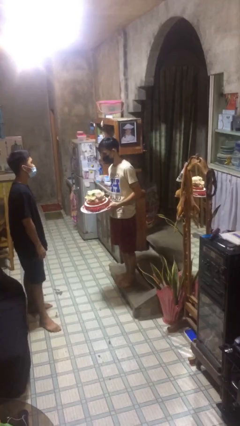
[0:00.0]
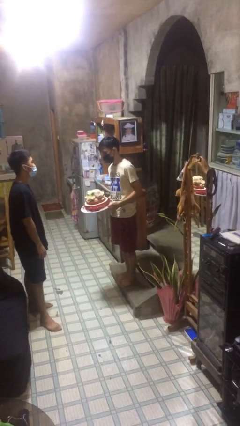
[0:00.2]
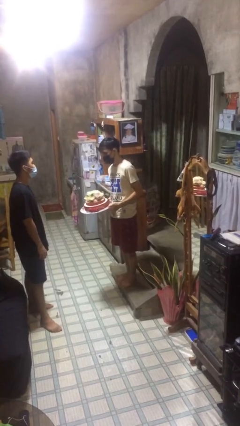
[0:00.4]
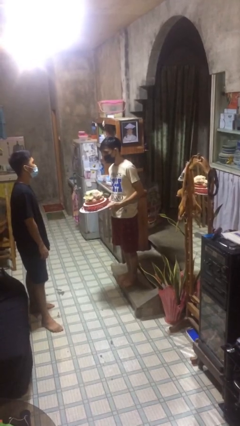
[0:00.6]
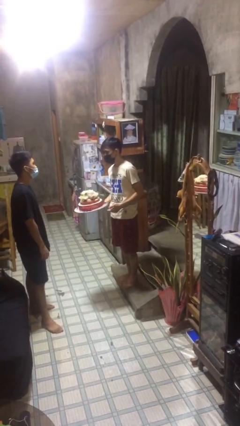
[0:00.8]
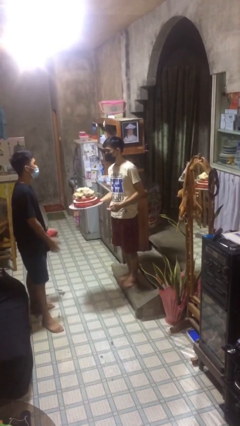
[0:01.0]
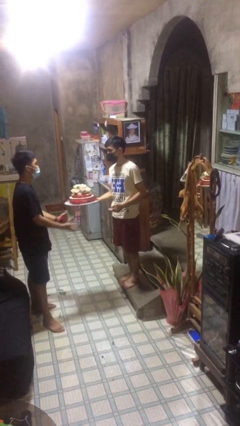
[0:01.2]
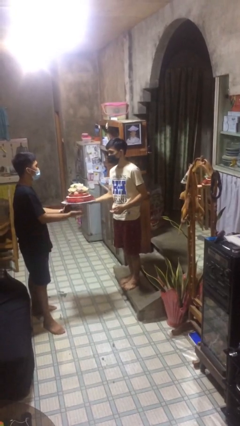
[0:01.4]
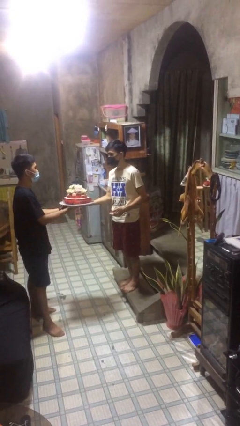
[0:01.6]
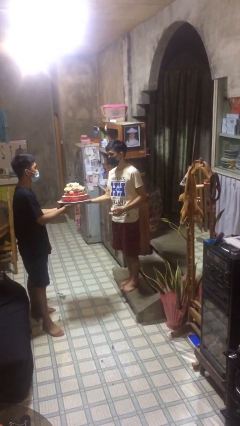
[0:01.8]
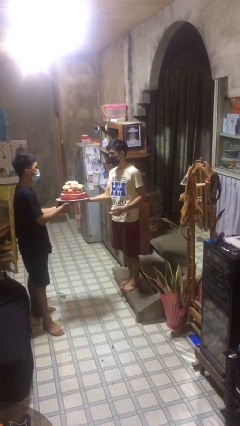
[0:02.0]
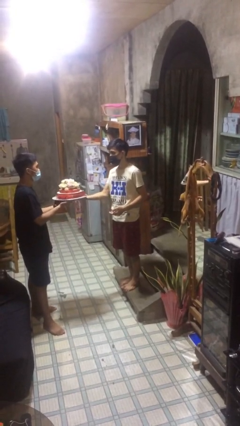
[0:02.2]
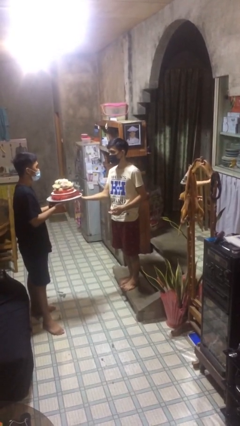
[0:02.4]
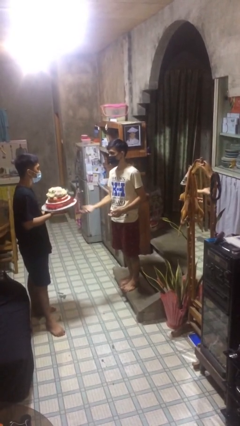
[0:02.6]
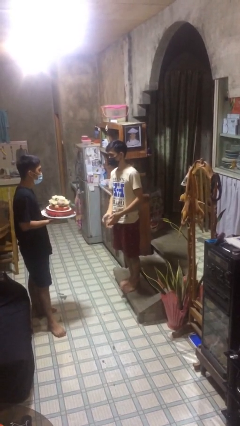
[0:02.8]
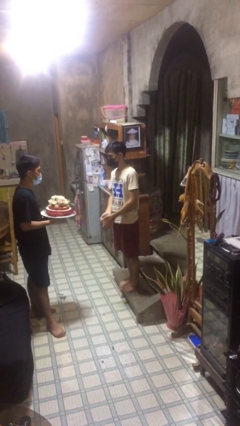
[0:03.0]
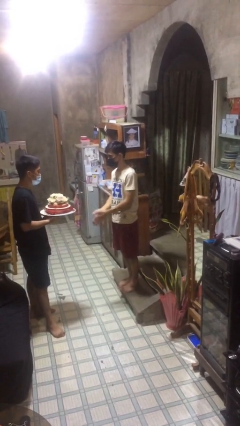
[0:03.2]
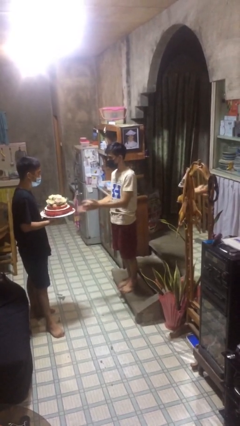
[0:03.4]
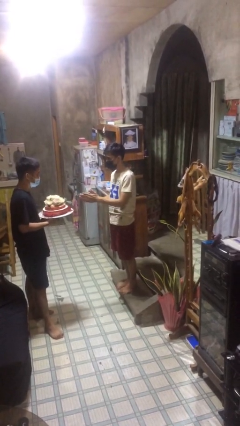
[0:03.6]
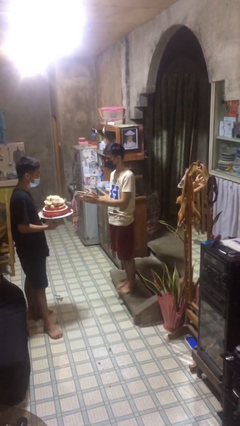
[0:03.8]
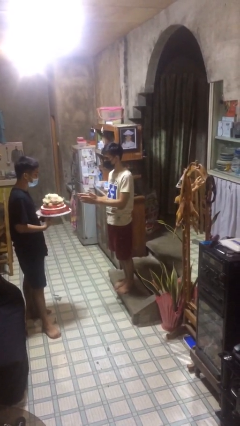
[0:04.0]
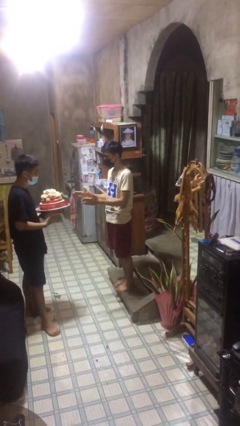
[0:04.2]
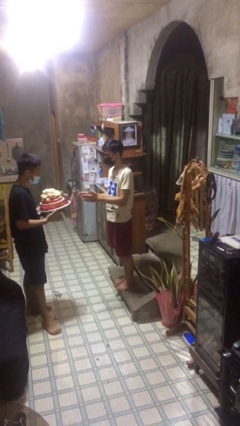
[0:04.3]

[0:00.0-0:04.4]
person transfers object to person

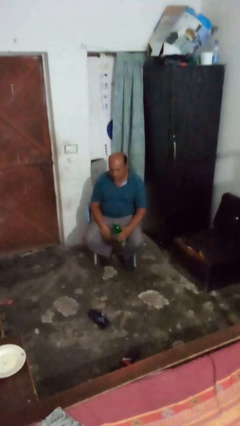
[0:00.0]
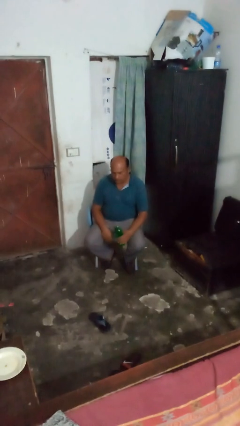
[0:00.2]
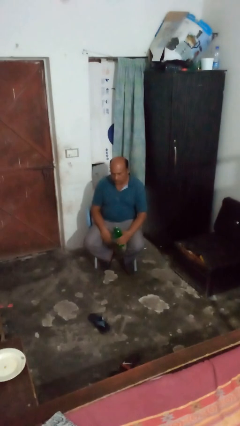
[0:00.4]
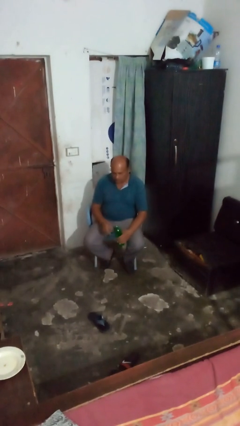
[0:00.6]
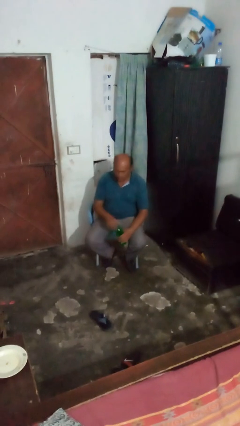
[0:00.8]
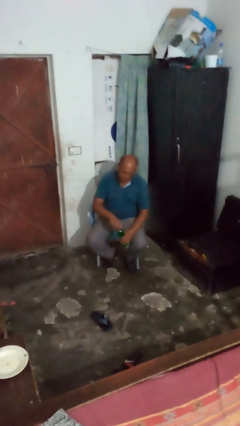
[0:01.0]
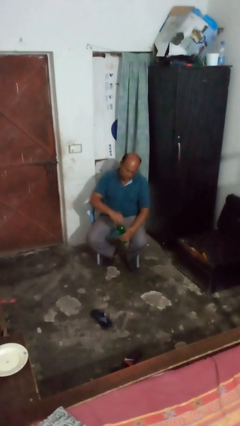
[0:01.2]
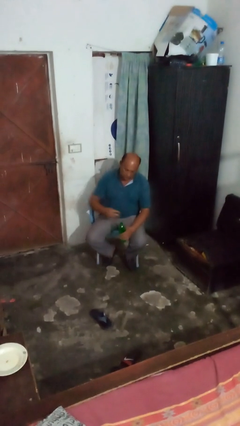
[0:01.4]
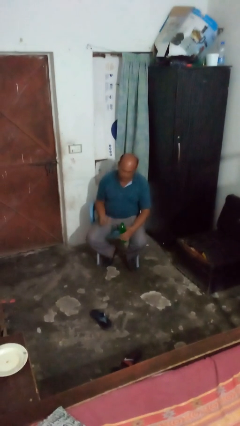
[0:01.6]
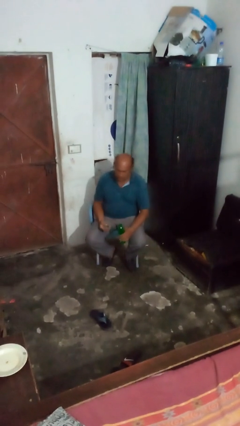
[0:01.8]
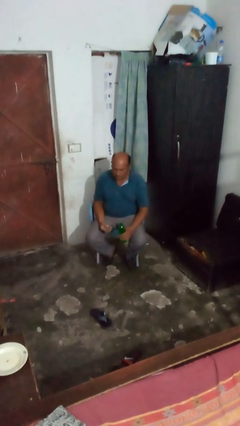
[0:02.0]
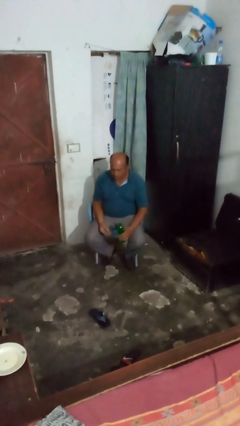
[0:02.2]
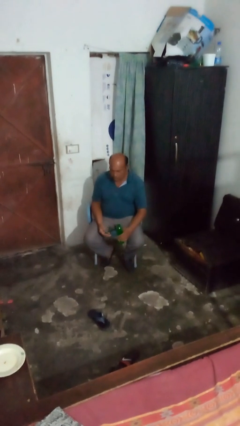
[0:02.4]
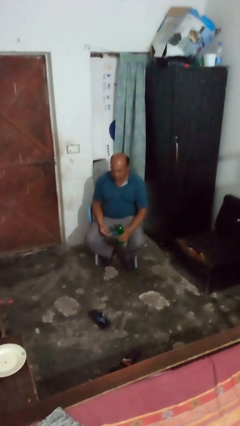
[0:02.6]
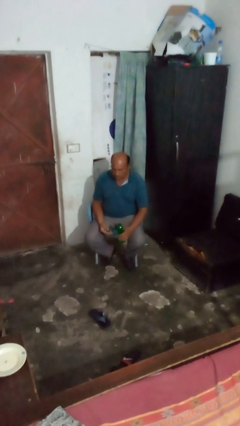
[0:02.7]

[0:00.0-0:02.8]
person unscrews lid from bottle

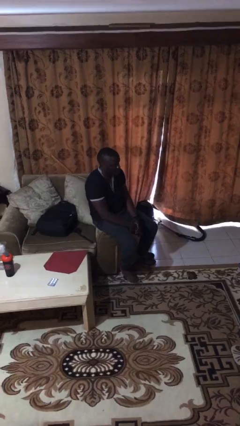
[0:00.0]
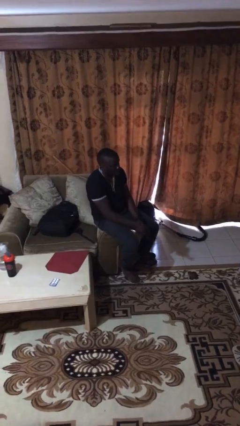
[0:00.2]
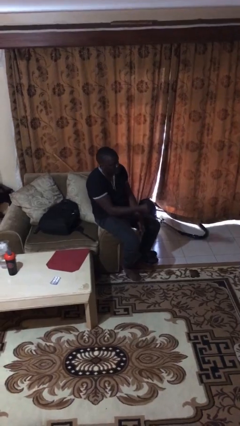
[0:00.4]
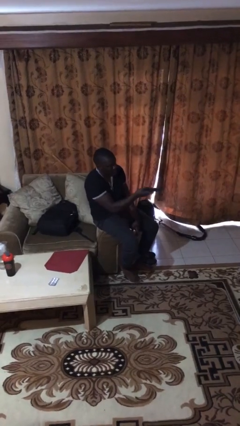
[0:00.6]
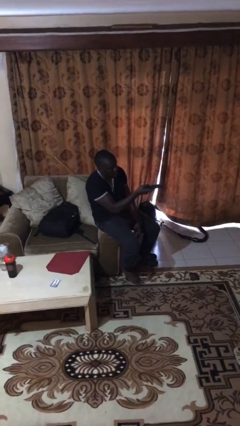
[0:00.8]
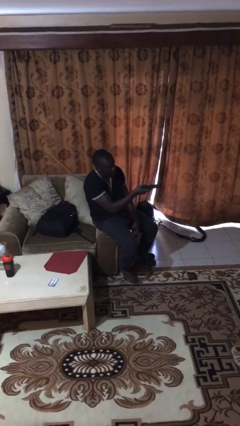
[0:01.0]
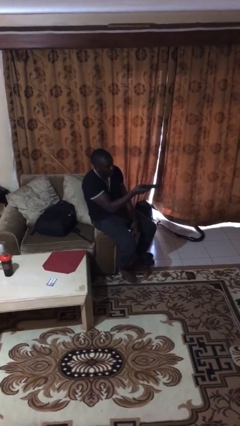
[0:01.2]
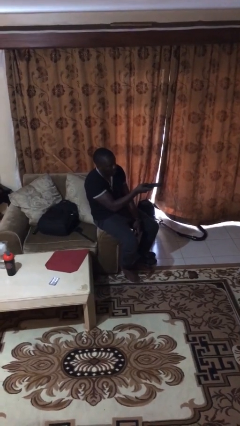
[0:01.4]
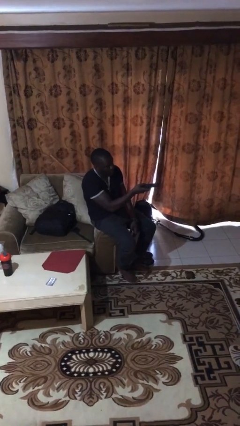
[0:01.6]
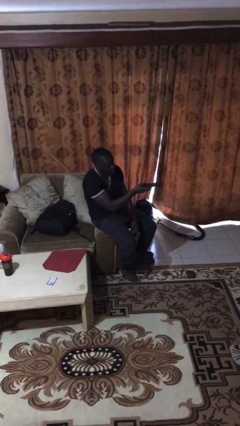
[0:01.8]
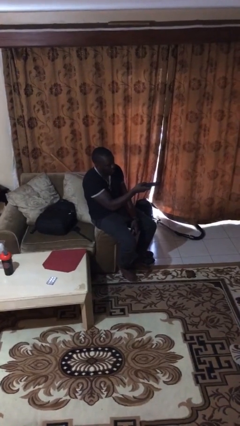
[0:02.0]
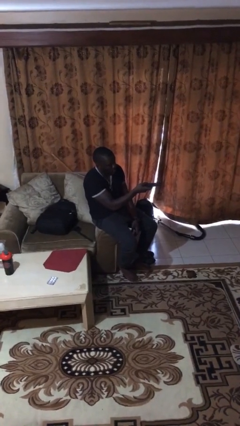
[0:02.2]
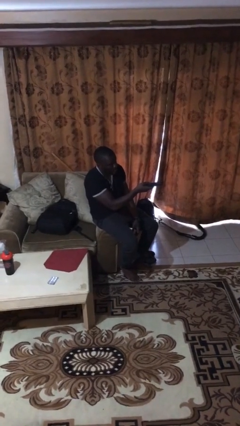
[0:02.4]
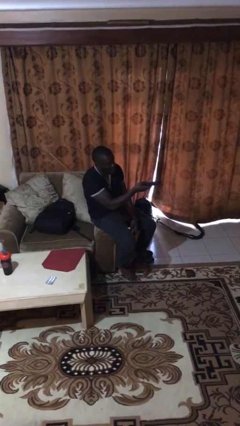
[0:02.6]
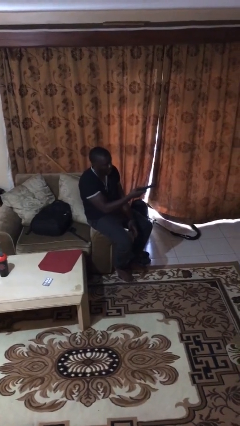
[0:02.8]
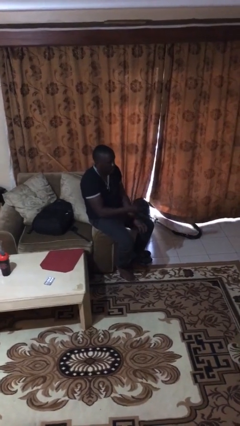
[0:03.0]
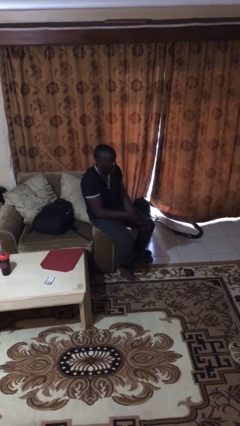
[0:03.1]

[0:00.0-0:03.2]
person uses television remote

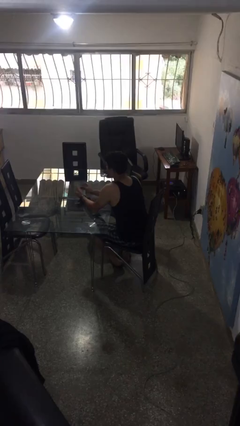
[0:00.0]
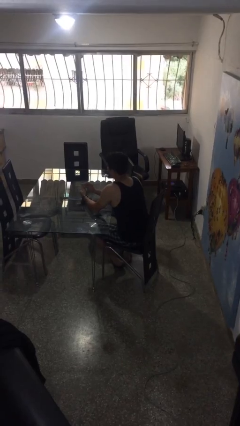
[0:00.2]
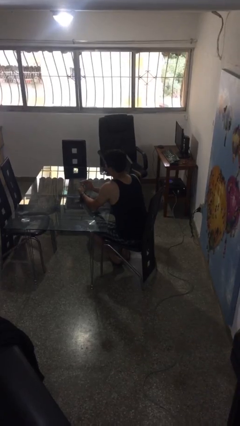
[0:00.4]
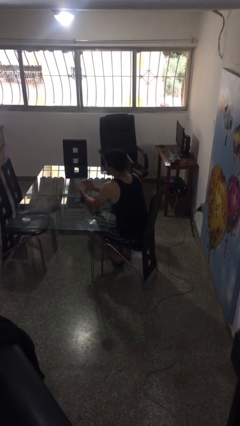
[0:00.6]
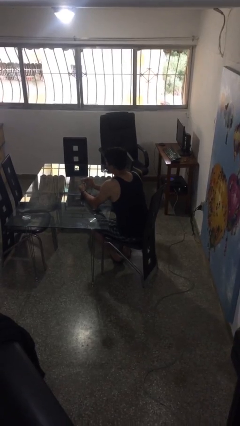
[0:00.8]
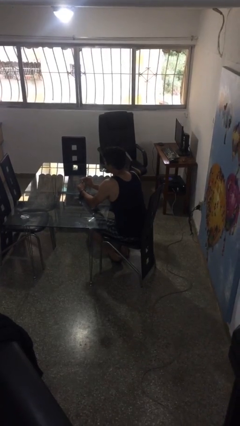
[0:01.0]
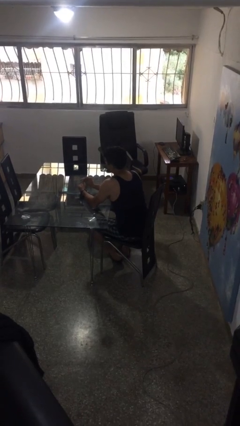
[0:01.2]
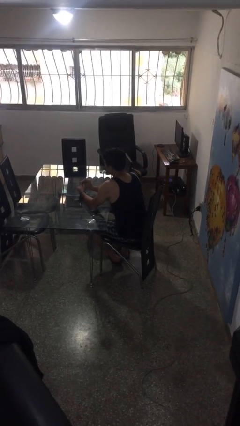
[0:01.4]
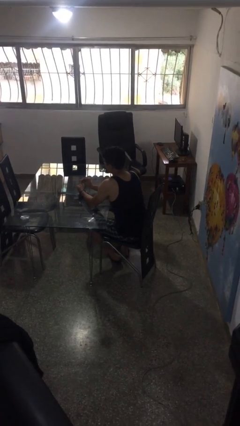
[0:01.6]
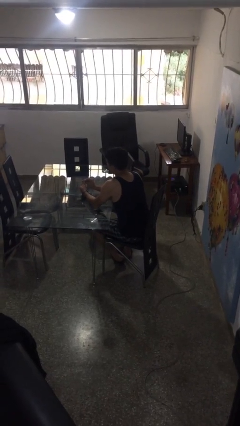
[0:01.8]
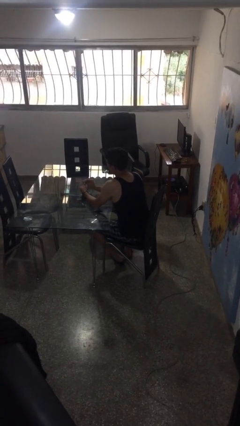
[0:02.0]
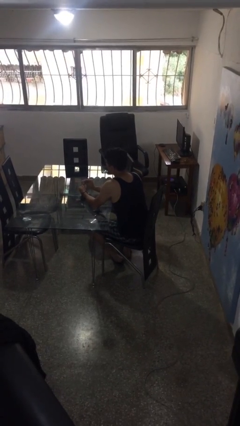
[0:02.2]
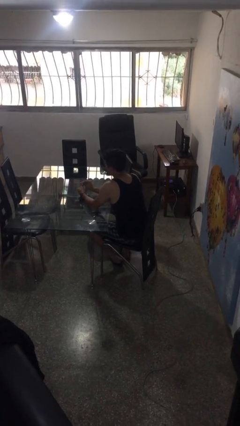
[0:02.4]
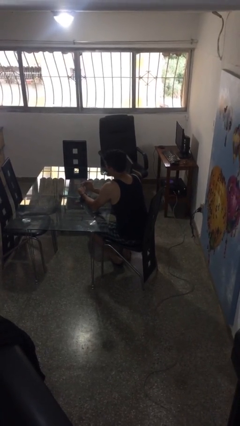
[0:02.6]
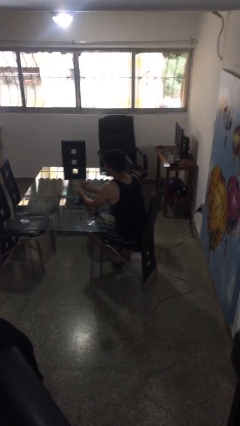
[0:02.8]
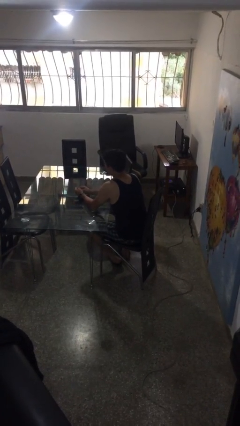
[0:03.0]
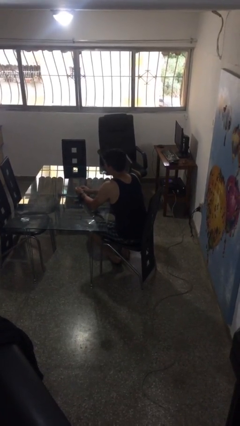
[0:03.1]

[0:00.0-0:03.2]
person files fingernails

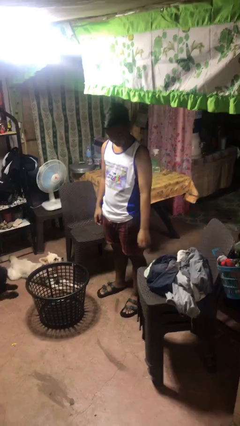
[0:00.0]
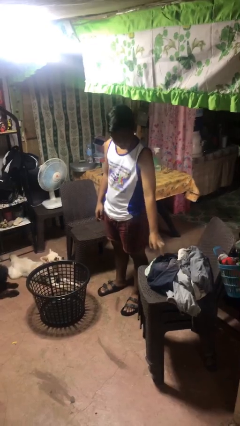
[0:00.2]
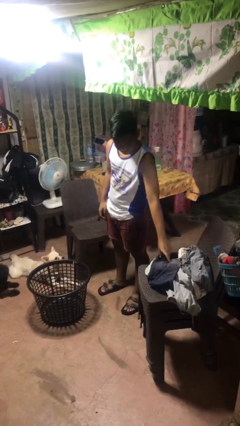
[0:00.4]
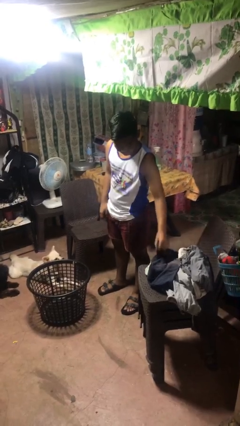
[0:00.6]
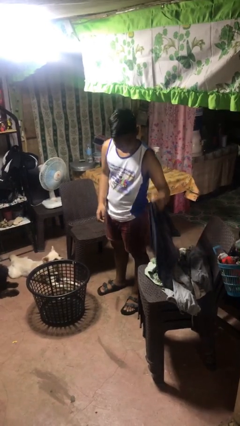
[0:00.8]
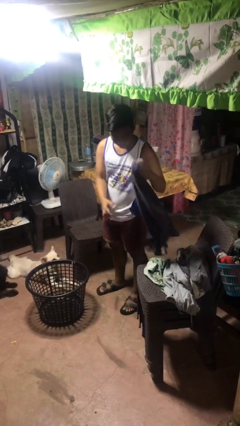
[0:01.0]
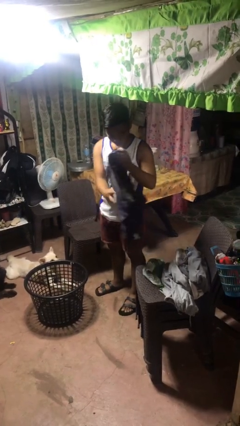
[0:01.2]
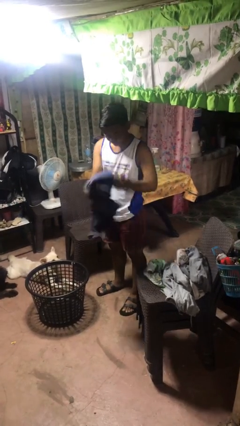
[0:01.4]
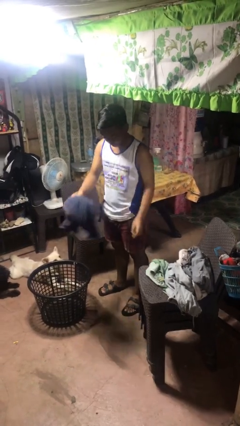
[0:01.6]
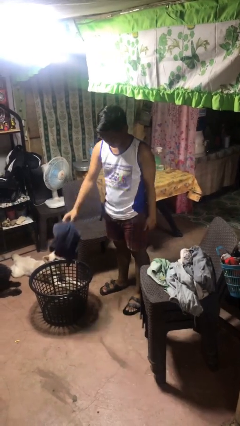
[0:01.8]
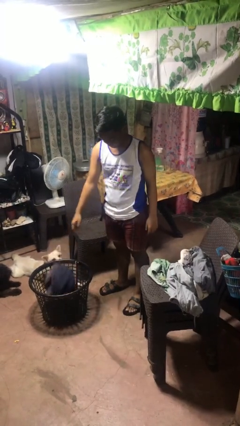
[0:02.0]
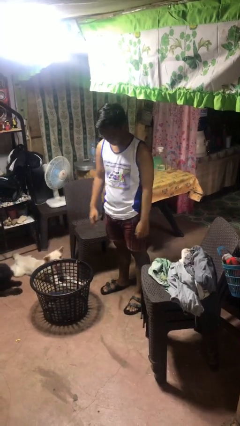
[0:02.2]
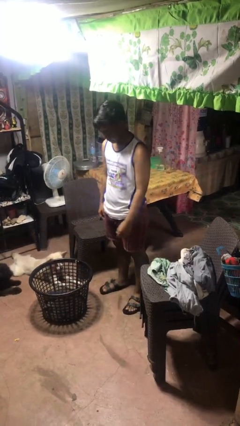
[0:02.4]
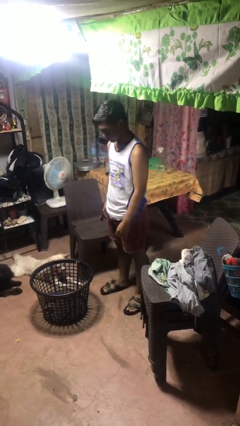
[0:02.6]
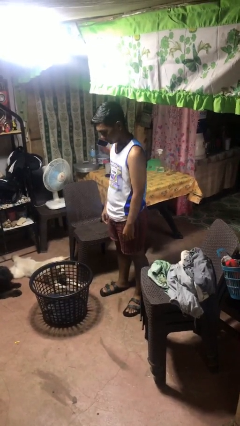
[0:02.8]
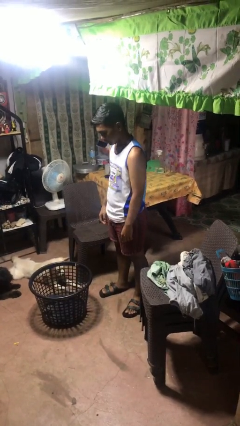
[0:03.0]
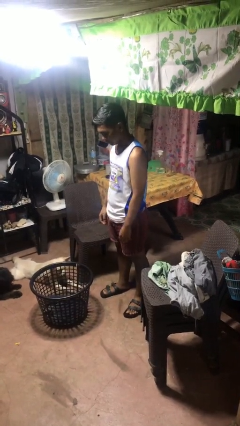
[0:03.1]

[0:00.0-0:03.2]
person puts object into basket

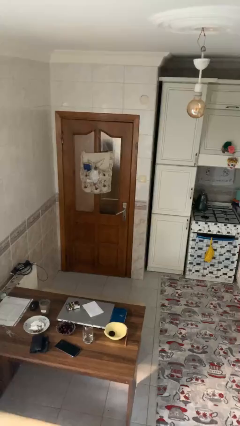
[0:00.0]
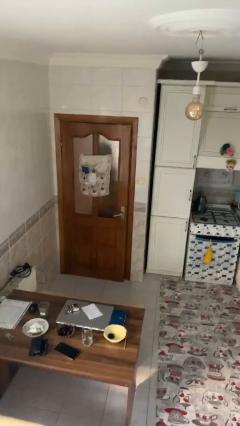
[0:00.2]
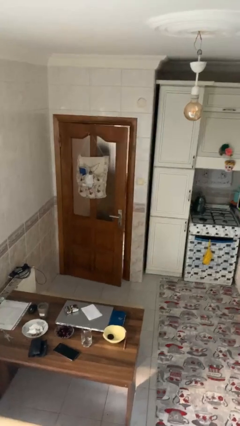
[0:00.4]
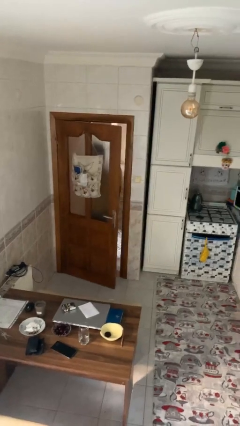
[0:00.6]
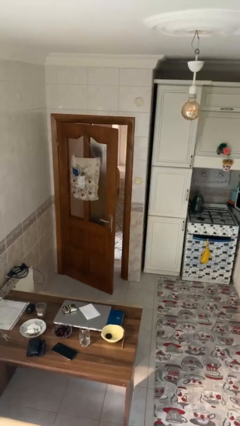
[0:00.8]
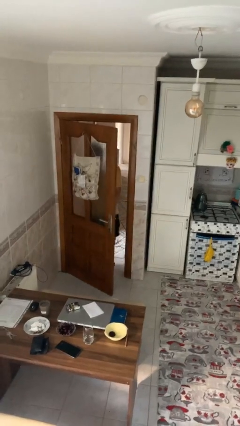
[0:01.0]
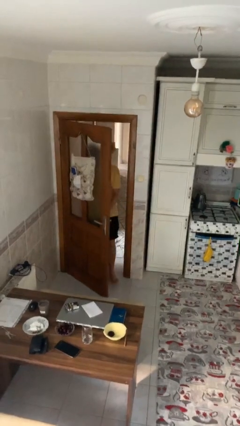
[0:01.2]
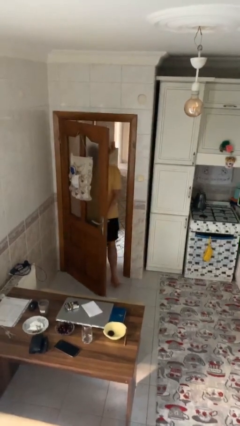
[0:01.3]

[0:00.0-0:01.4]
person opens facility door
